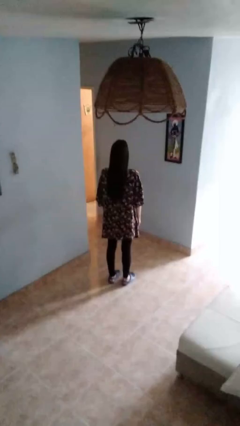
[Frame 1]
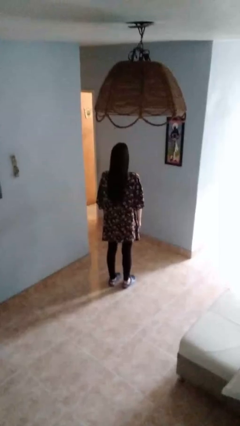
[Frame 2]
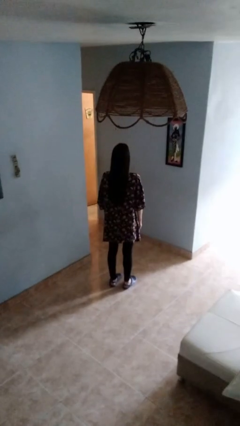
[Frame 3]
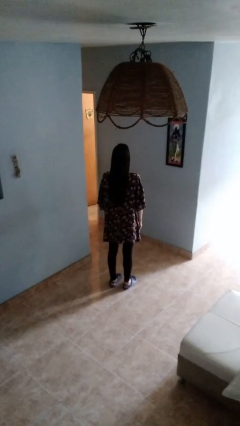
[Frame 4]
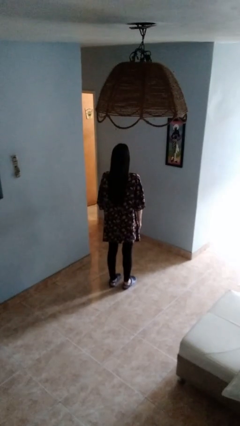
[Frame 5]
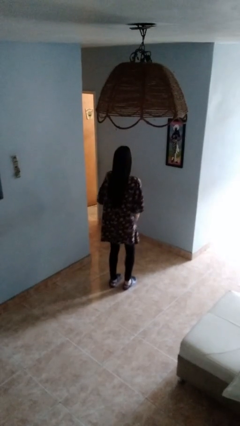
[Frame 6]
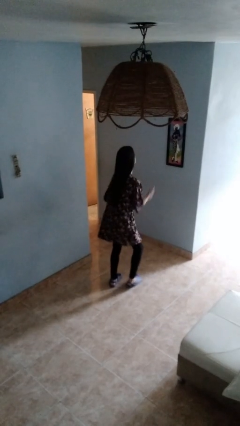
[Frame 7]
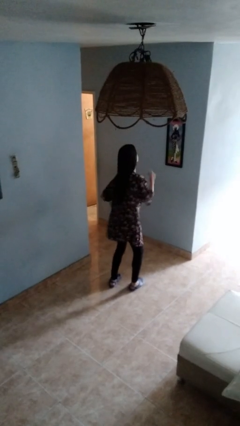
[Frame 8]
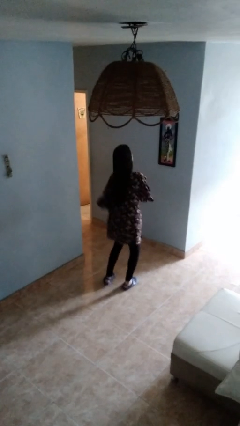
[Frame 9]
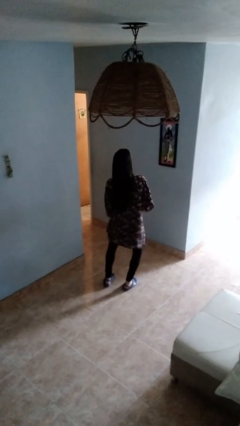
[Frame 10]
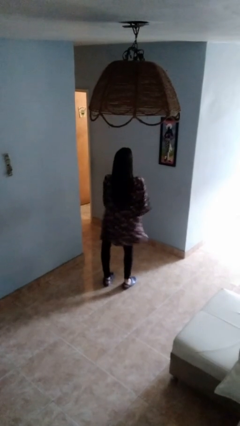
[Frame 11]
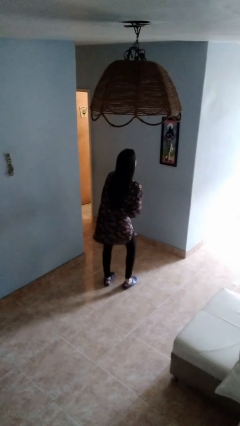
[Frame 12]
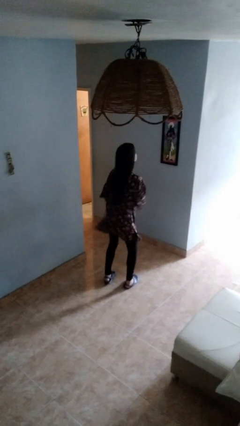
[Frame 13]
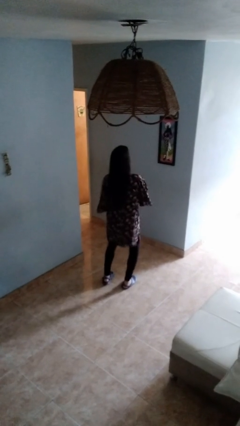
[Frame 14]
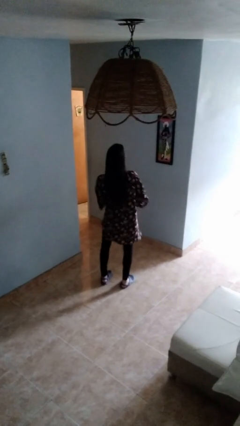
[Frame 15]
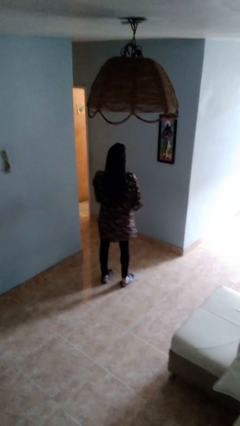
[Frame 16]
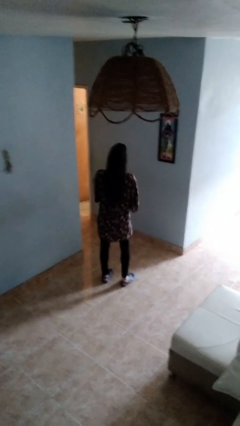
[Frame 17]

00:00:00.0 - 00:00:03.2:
person dances in place

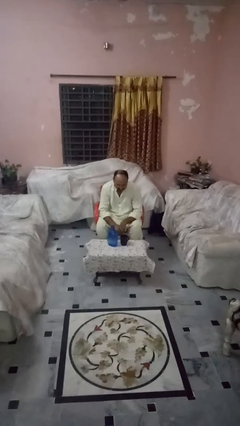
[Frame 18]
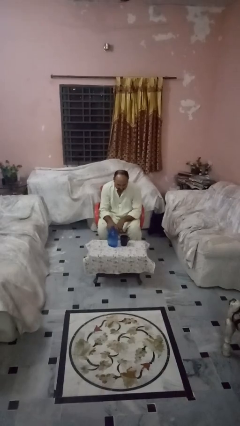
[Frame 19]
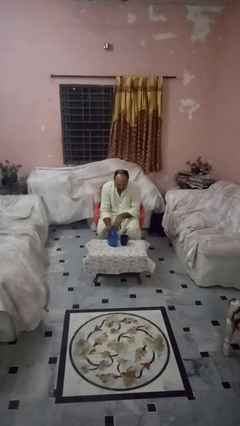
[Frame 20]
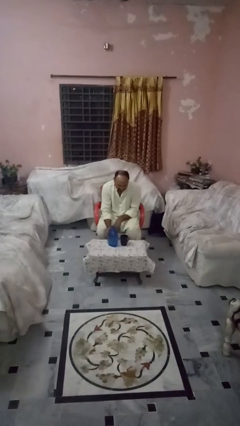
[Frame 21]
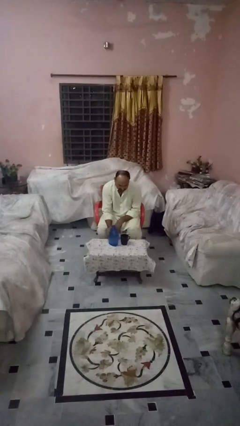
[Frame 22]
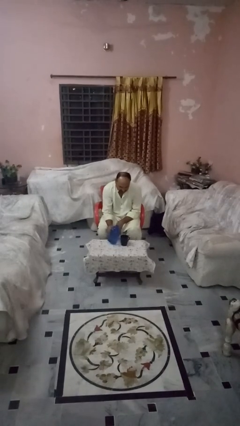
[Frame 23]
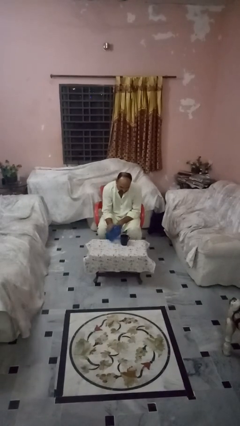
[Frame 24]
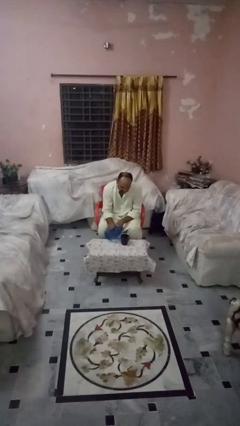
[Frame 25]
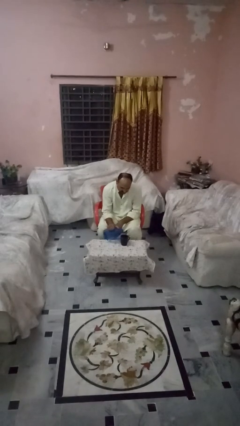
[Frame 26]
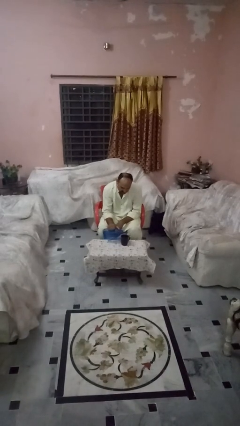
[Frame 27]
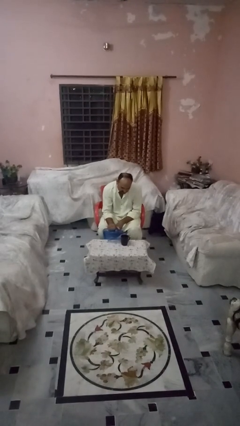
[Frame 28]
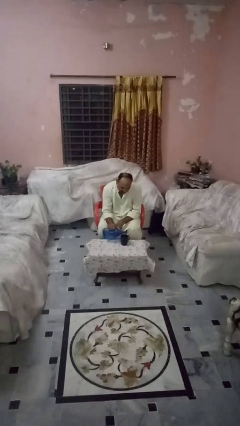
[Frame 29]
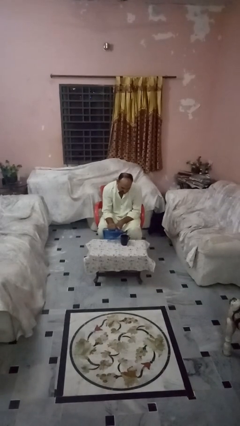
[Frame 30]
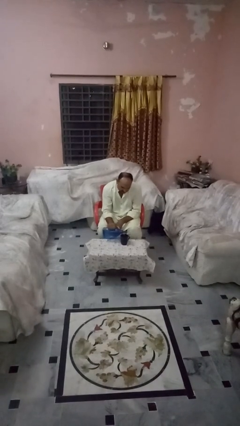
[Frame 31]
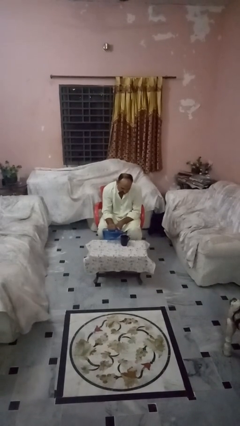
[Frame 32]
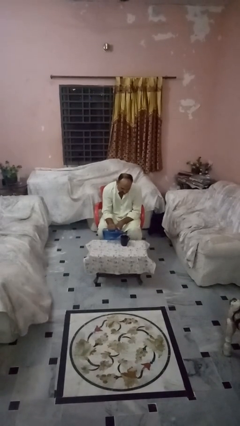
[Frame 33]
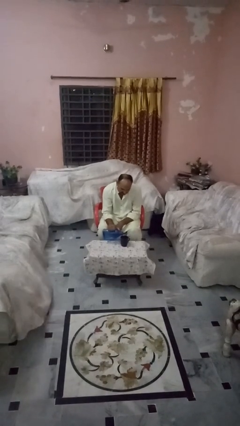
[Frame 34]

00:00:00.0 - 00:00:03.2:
person pours liquid into cup

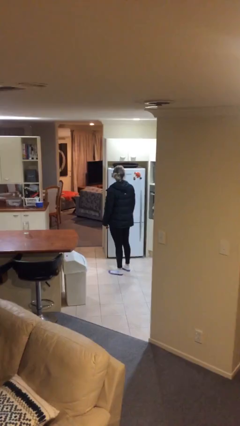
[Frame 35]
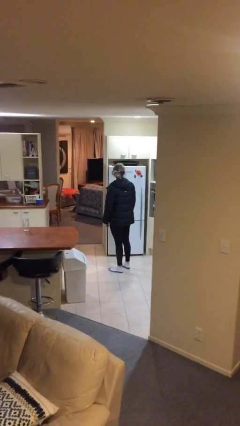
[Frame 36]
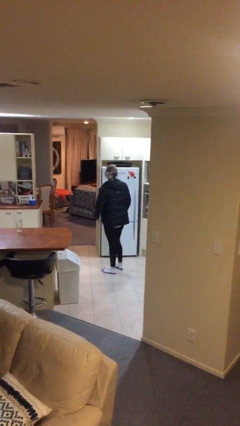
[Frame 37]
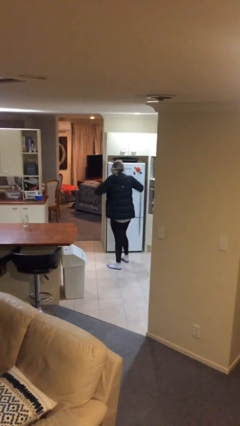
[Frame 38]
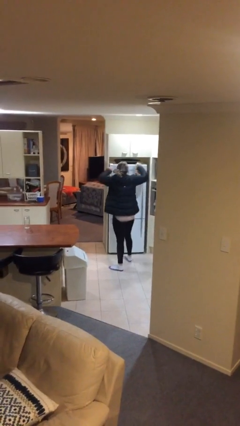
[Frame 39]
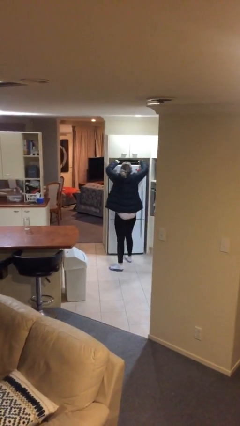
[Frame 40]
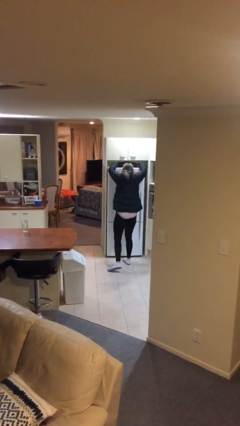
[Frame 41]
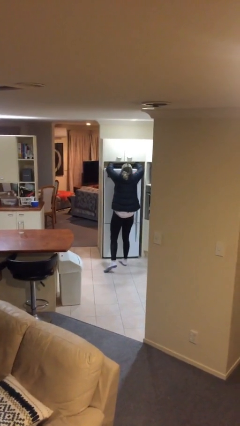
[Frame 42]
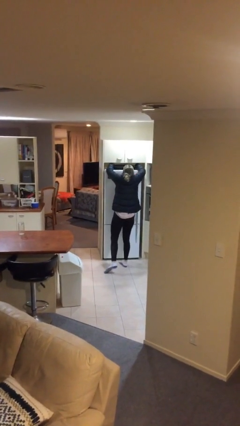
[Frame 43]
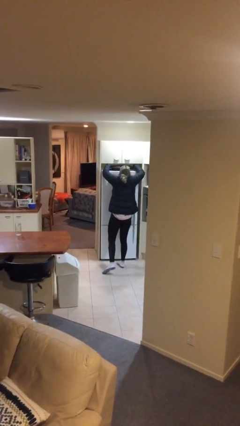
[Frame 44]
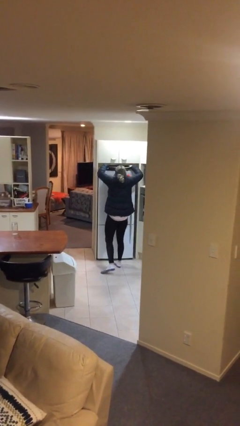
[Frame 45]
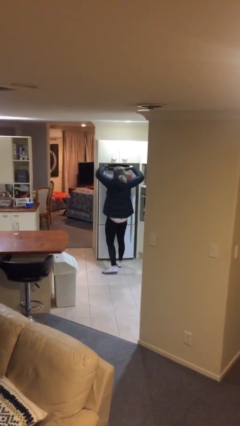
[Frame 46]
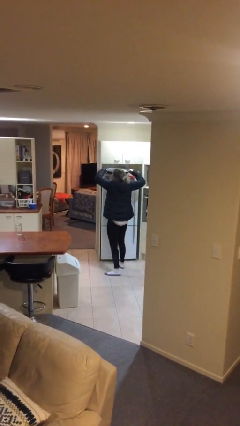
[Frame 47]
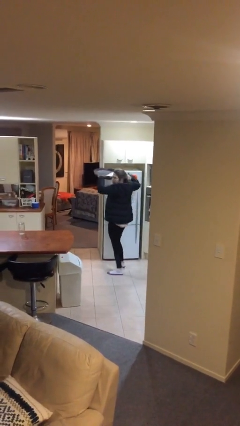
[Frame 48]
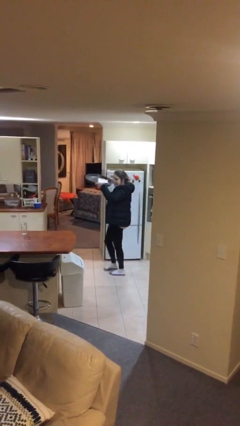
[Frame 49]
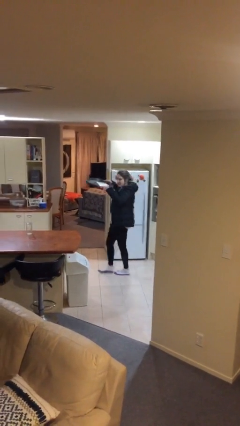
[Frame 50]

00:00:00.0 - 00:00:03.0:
person picks up object from shelf

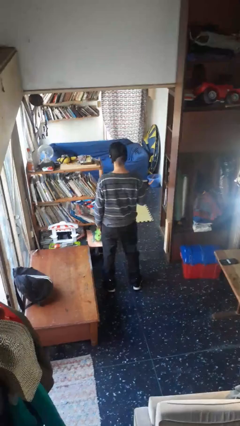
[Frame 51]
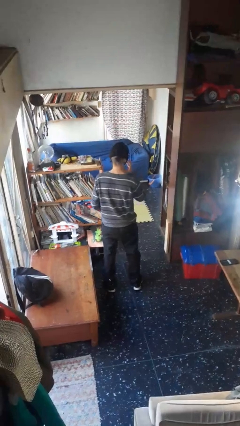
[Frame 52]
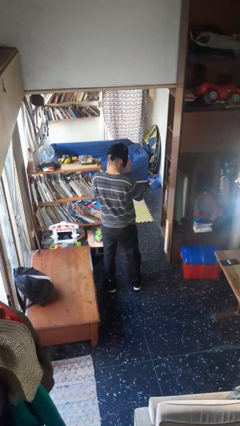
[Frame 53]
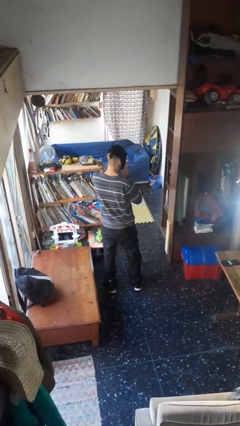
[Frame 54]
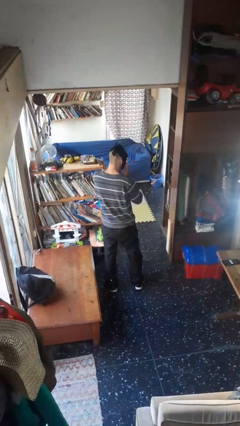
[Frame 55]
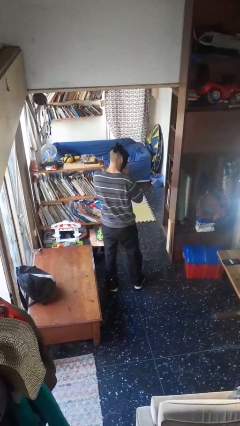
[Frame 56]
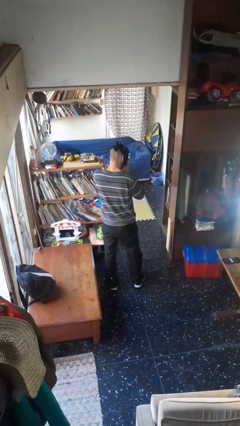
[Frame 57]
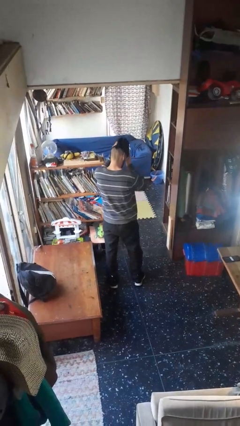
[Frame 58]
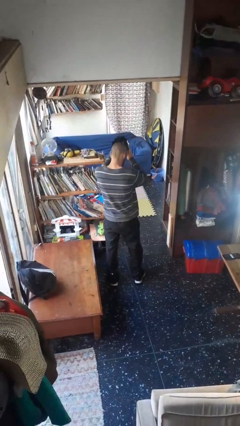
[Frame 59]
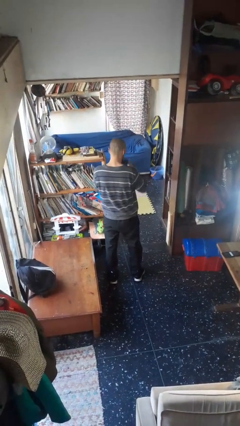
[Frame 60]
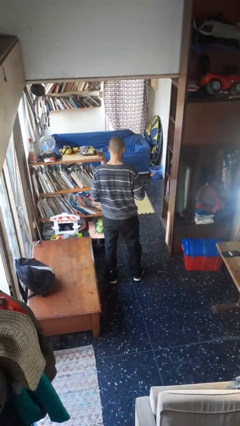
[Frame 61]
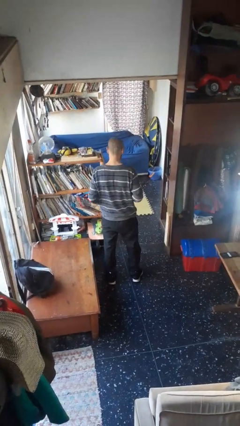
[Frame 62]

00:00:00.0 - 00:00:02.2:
person takes off facemask

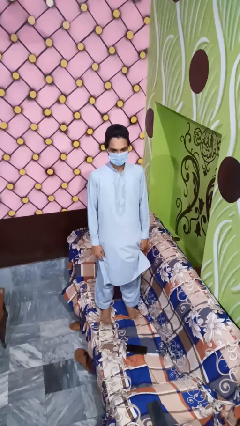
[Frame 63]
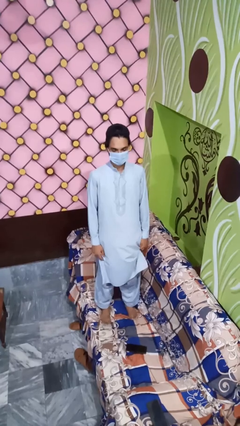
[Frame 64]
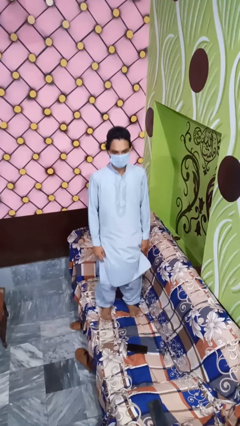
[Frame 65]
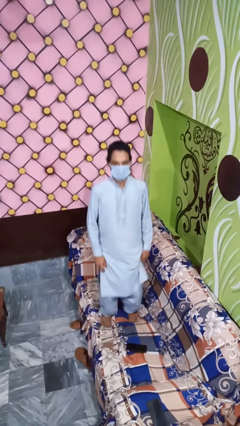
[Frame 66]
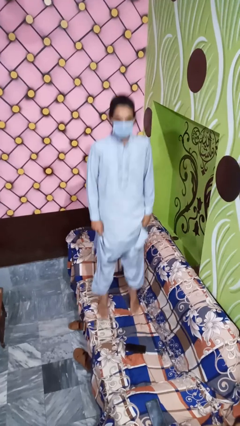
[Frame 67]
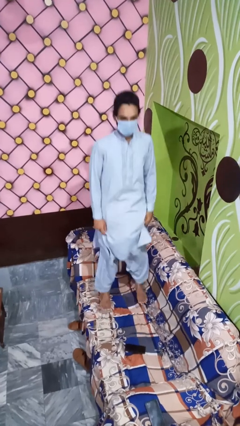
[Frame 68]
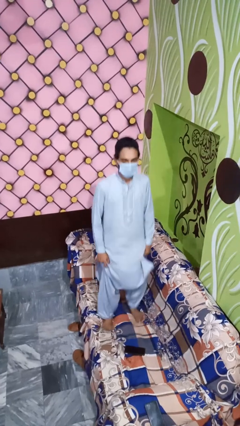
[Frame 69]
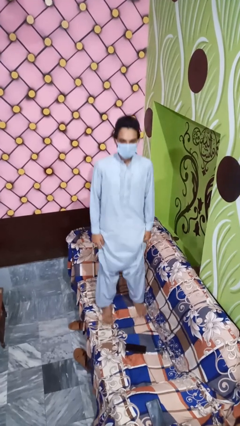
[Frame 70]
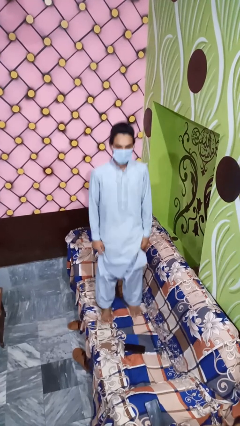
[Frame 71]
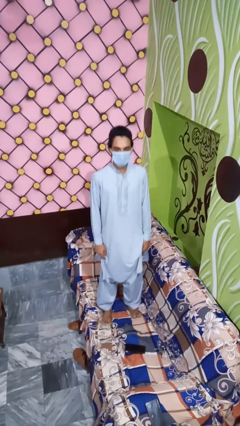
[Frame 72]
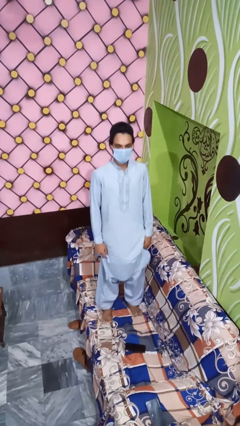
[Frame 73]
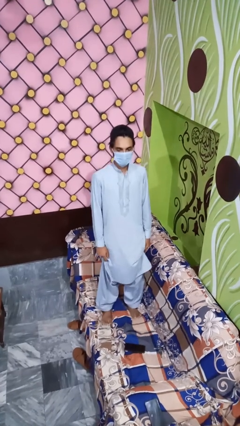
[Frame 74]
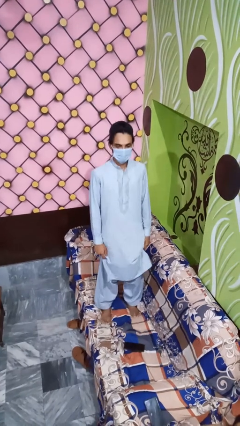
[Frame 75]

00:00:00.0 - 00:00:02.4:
person jumps on couch

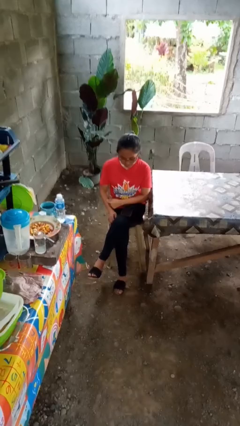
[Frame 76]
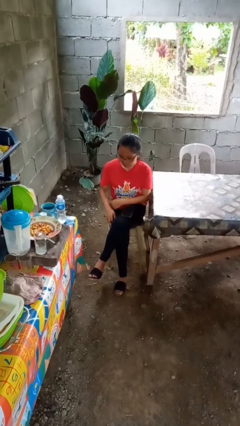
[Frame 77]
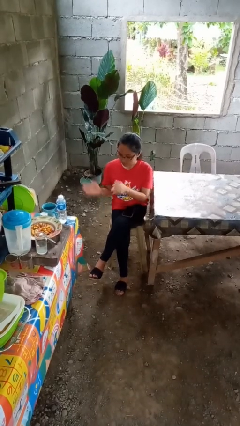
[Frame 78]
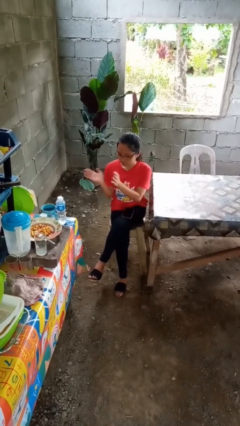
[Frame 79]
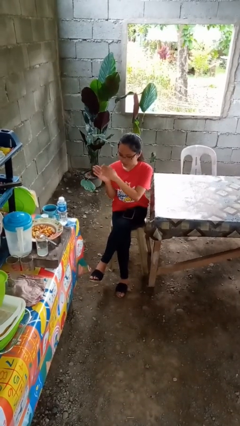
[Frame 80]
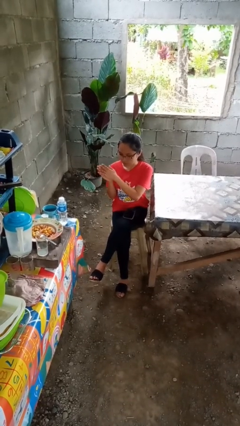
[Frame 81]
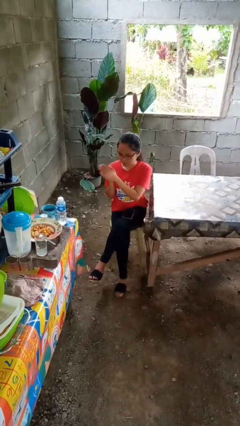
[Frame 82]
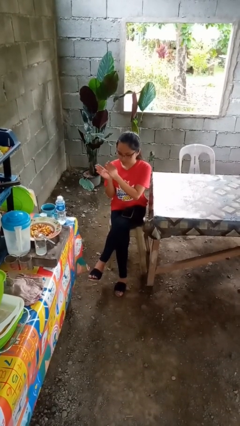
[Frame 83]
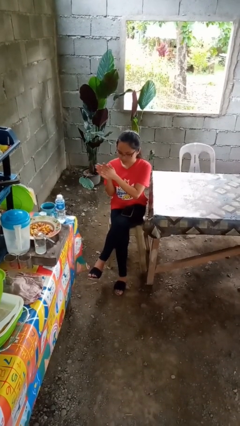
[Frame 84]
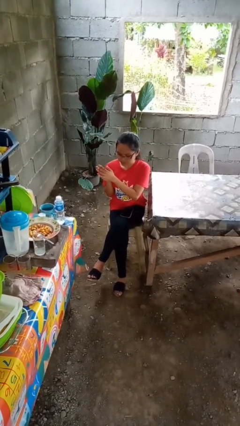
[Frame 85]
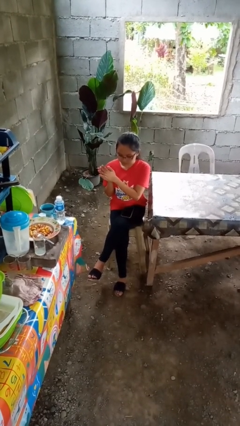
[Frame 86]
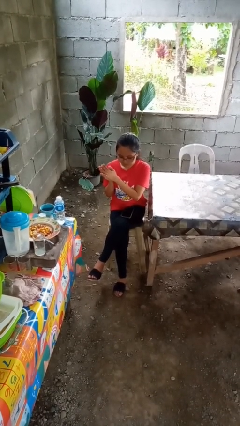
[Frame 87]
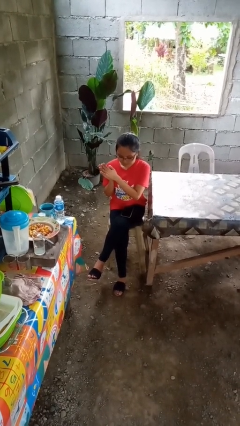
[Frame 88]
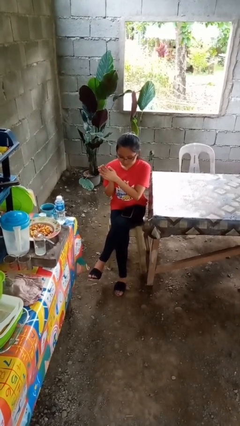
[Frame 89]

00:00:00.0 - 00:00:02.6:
person claps hands

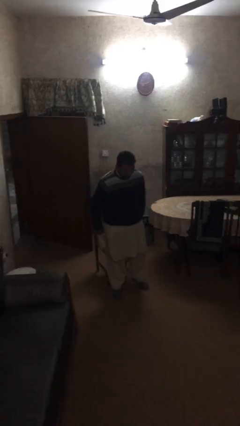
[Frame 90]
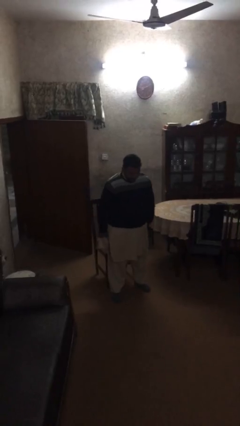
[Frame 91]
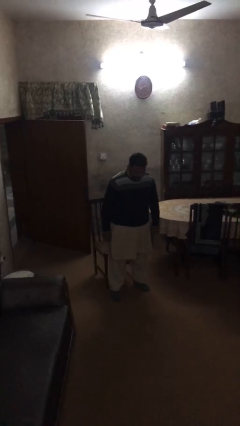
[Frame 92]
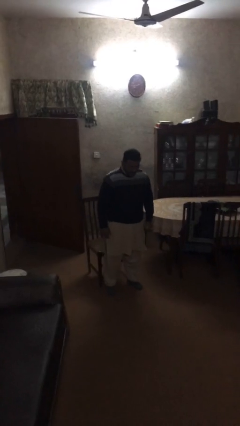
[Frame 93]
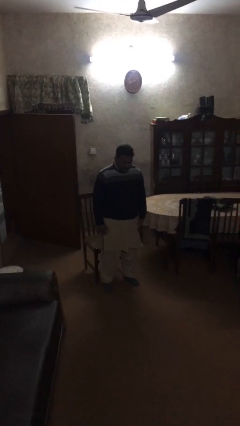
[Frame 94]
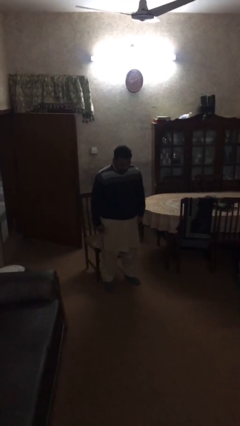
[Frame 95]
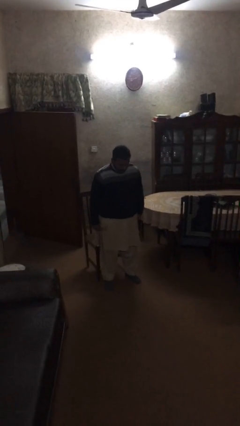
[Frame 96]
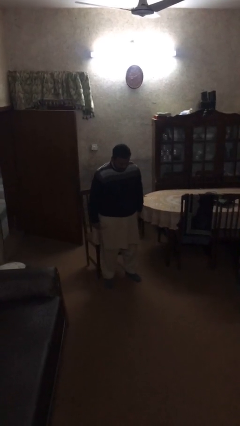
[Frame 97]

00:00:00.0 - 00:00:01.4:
person stands up
